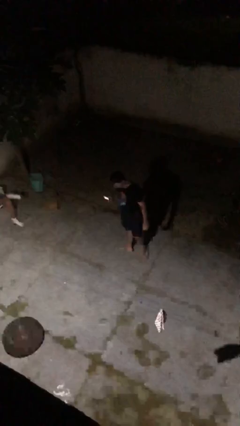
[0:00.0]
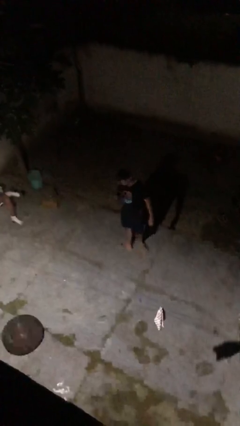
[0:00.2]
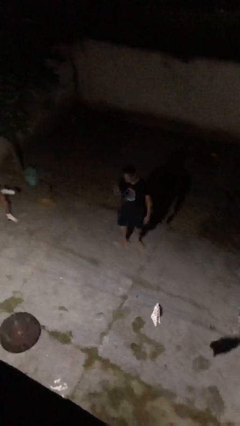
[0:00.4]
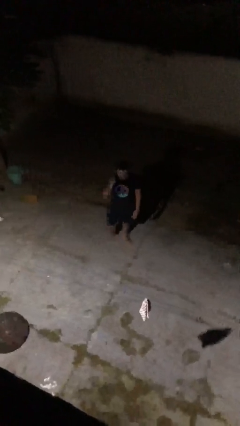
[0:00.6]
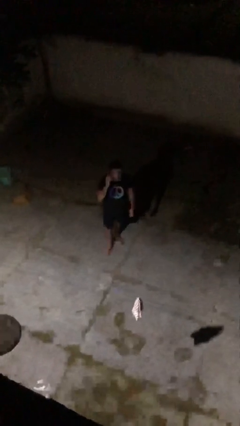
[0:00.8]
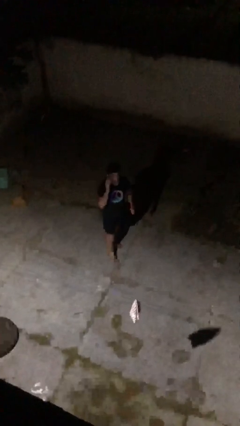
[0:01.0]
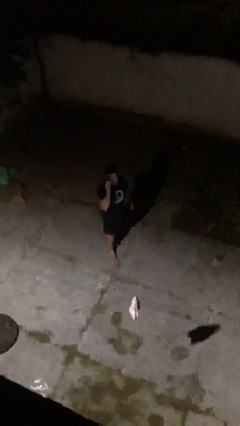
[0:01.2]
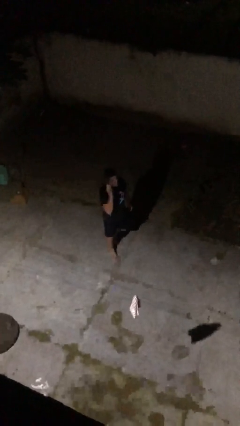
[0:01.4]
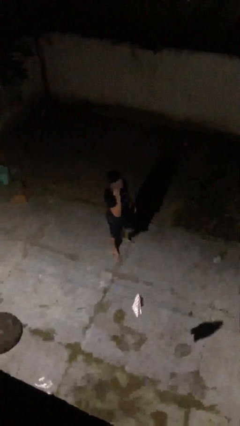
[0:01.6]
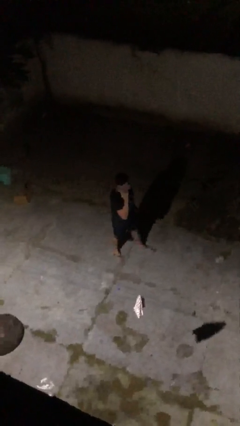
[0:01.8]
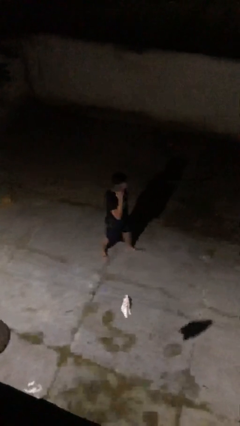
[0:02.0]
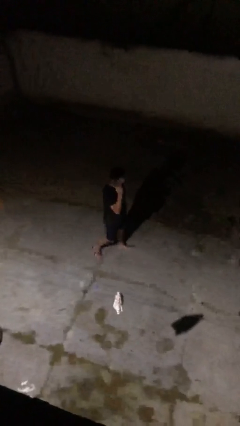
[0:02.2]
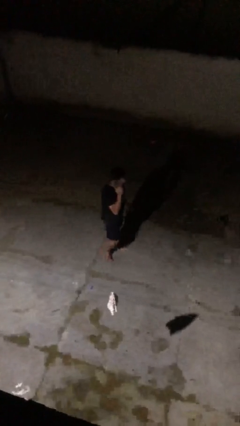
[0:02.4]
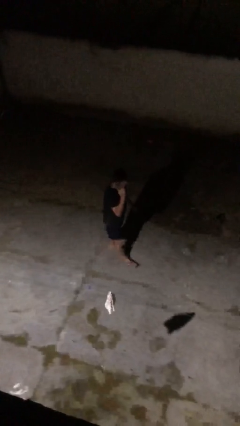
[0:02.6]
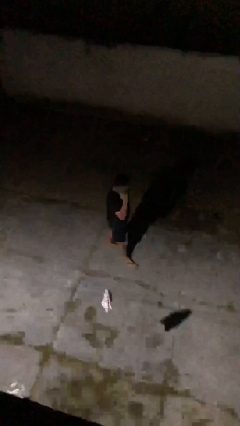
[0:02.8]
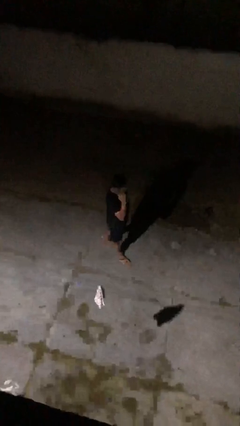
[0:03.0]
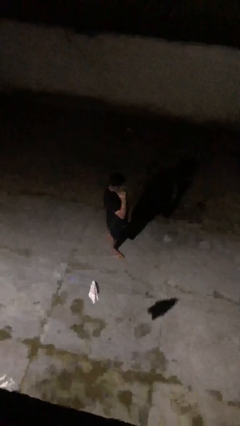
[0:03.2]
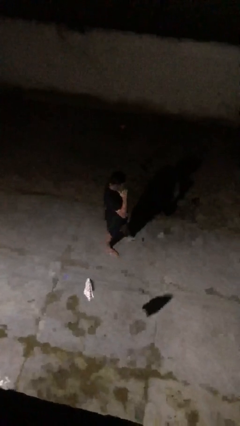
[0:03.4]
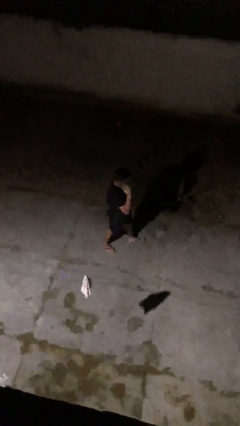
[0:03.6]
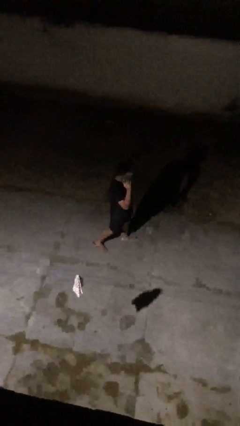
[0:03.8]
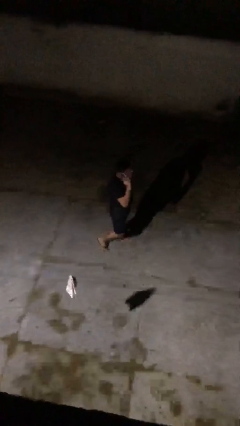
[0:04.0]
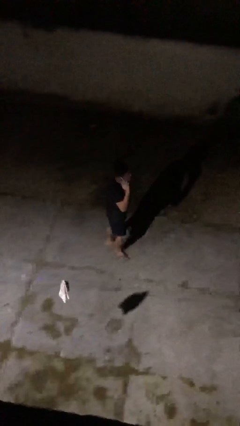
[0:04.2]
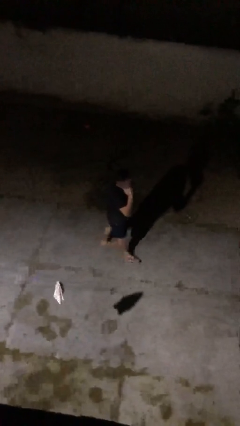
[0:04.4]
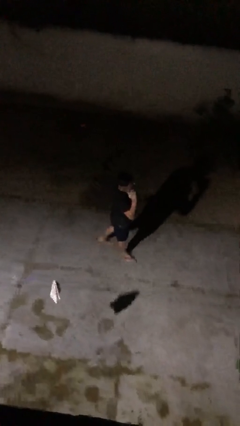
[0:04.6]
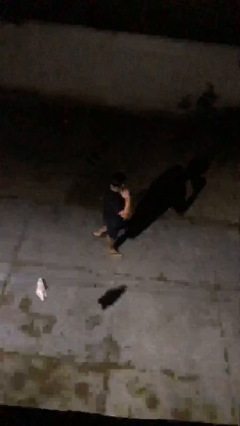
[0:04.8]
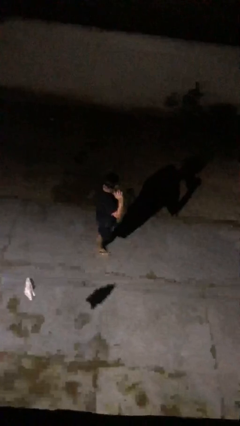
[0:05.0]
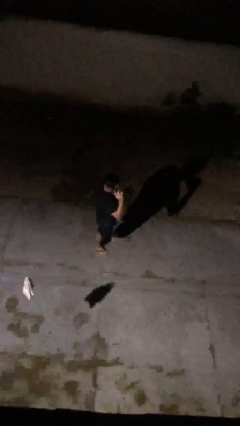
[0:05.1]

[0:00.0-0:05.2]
person talks on phone

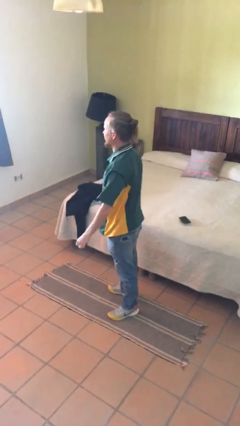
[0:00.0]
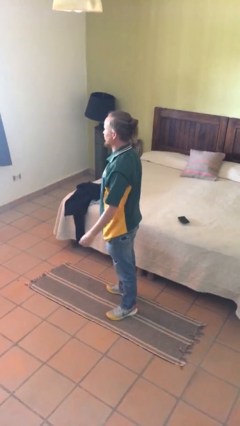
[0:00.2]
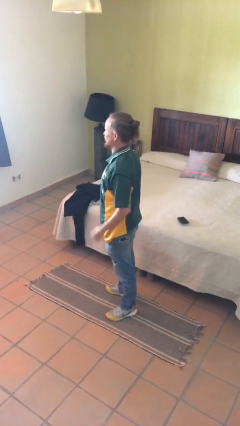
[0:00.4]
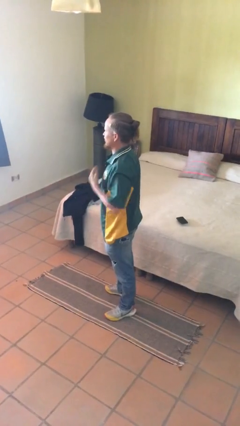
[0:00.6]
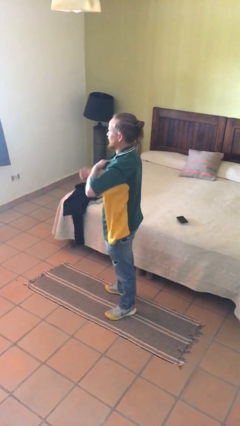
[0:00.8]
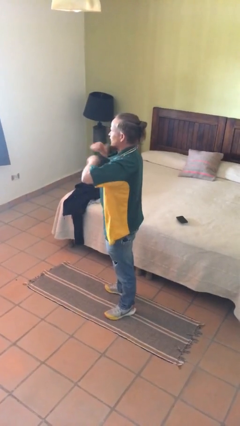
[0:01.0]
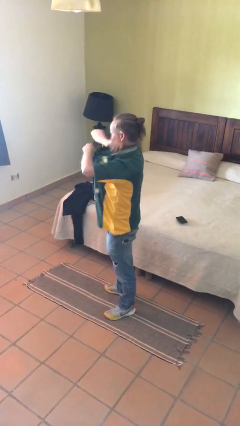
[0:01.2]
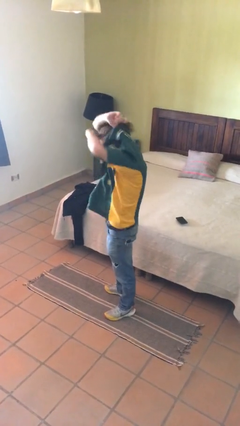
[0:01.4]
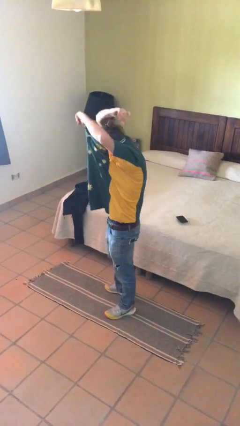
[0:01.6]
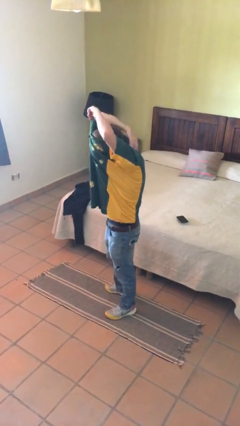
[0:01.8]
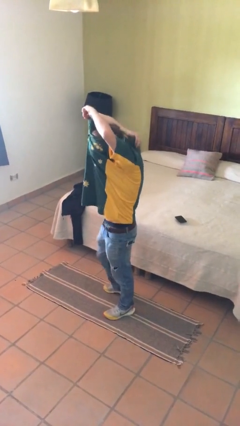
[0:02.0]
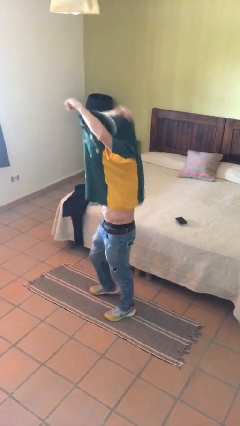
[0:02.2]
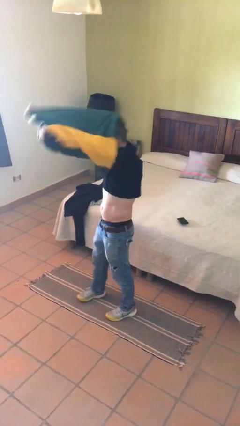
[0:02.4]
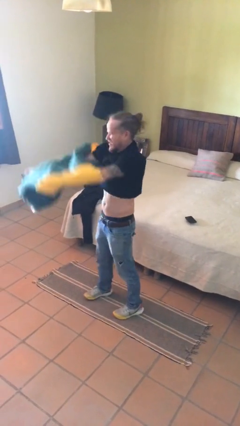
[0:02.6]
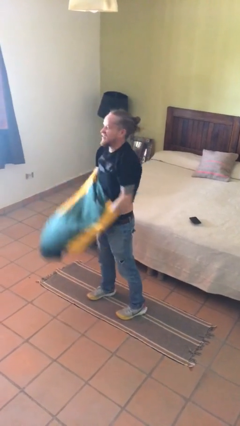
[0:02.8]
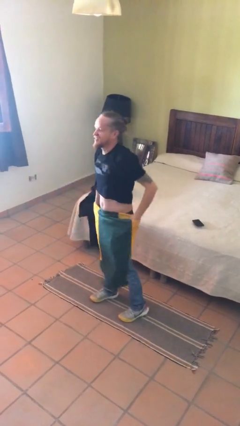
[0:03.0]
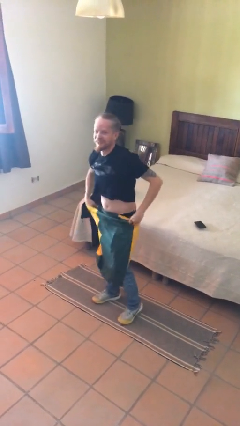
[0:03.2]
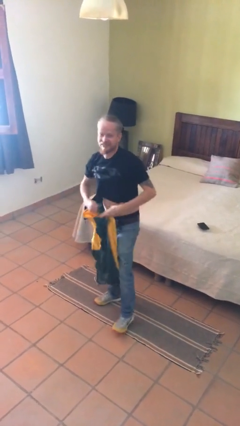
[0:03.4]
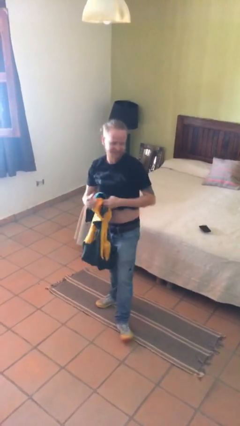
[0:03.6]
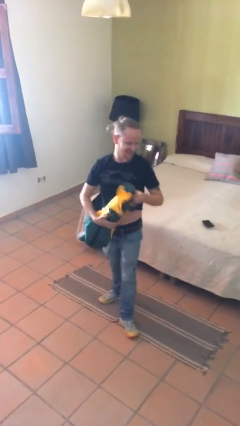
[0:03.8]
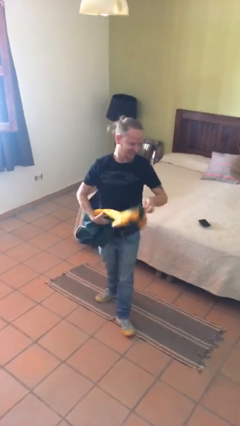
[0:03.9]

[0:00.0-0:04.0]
person takes off shirt

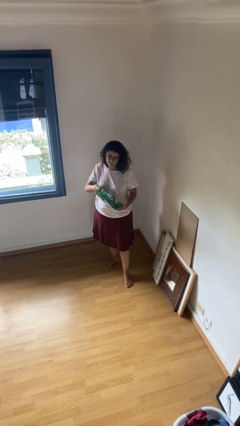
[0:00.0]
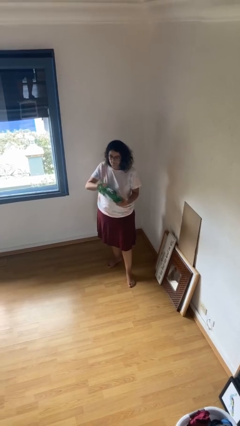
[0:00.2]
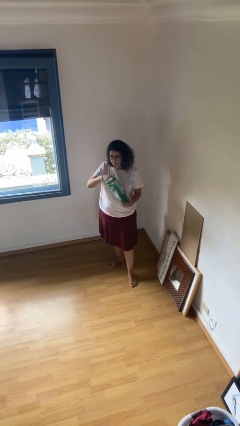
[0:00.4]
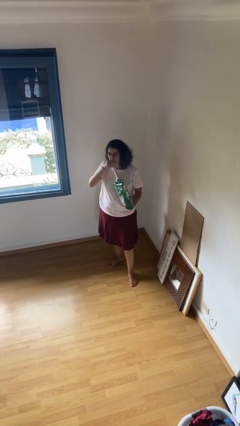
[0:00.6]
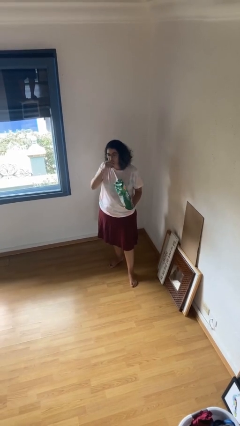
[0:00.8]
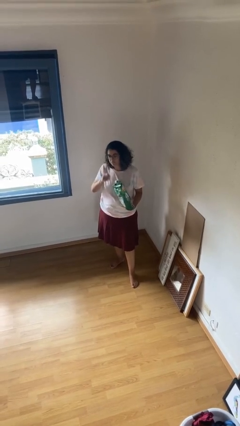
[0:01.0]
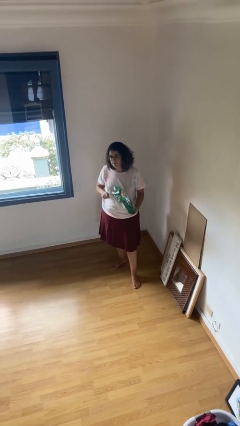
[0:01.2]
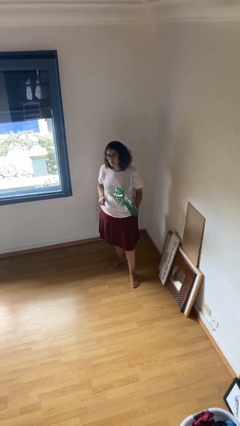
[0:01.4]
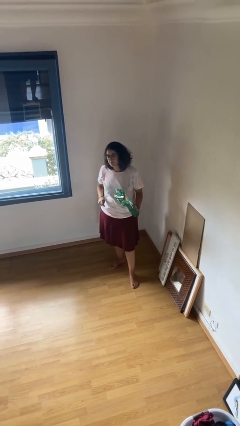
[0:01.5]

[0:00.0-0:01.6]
person eats snack from bag

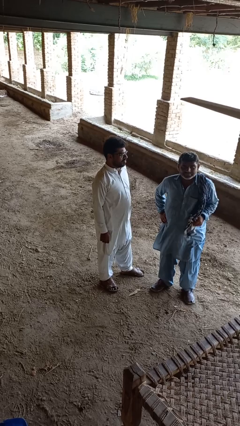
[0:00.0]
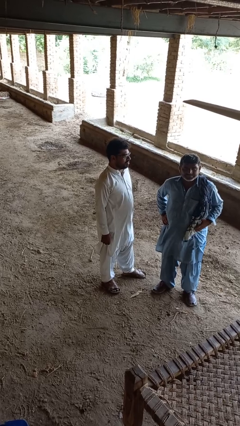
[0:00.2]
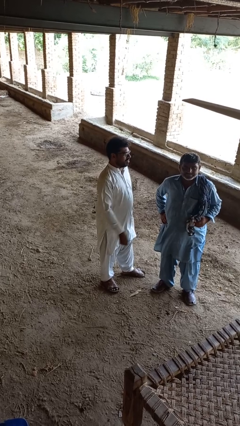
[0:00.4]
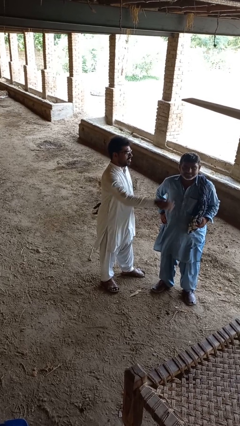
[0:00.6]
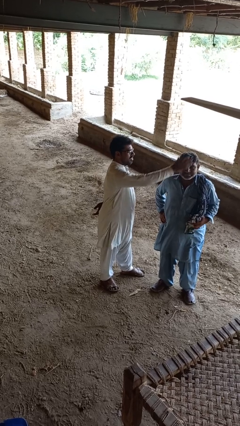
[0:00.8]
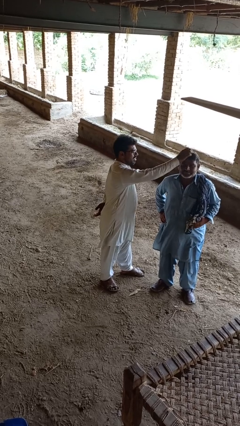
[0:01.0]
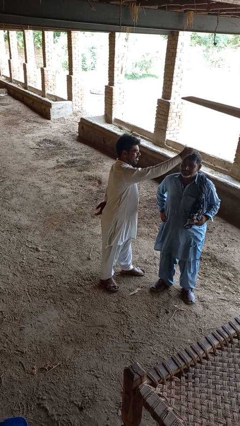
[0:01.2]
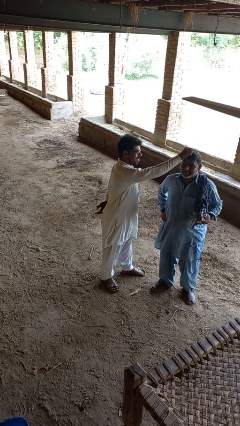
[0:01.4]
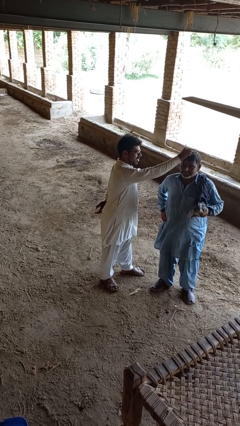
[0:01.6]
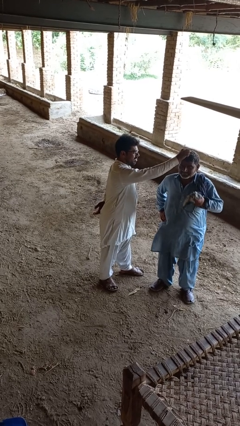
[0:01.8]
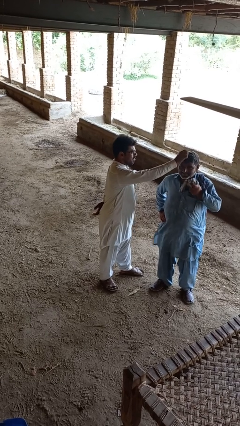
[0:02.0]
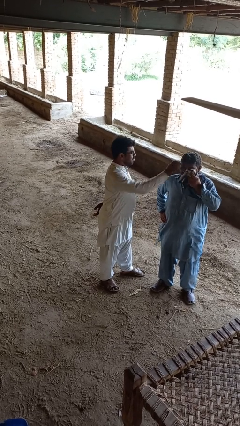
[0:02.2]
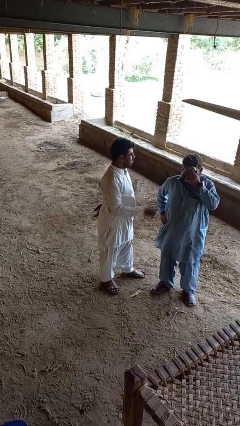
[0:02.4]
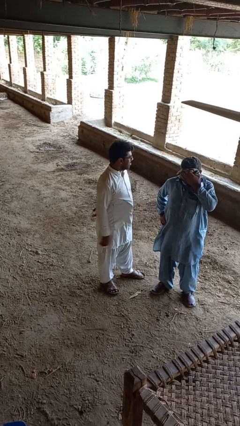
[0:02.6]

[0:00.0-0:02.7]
person grabs person by hair

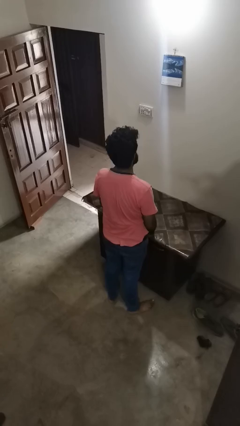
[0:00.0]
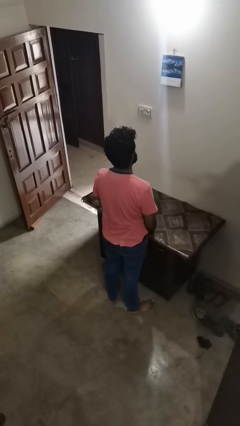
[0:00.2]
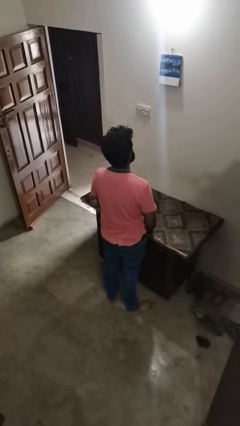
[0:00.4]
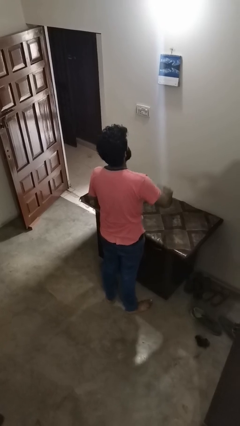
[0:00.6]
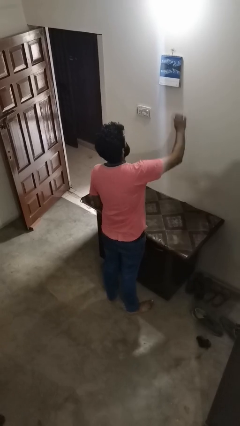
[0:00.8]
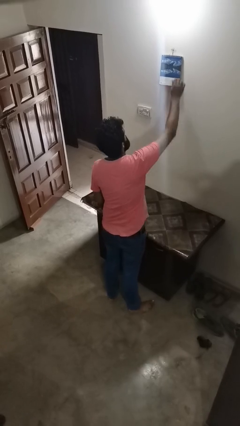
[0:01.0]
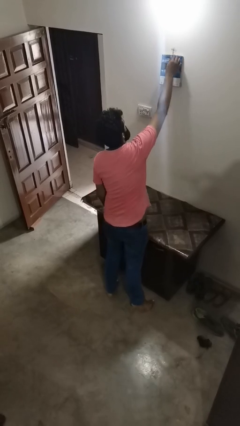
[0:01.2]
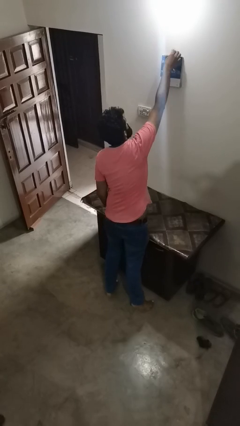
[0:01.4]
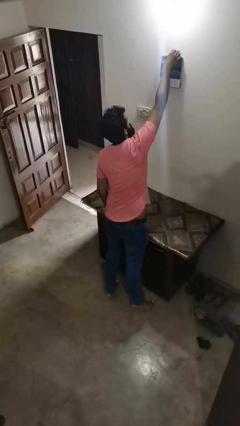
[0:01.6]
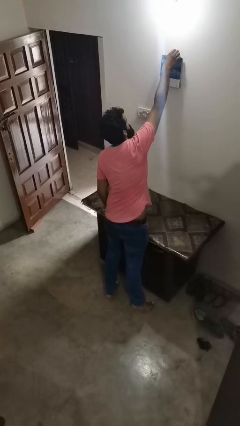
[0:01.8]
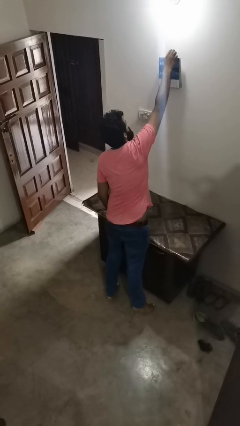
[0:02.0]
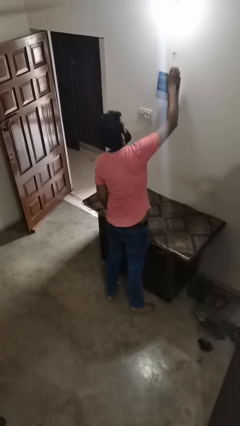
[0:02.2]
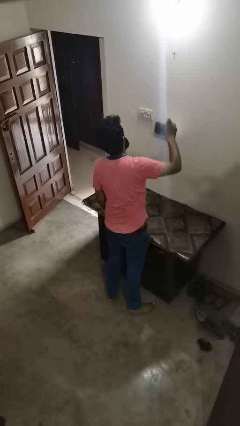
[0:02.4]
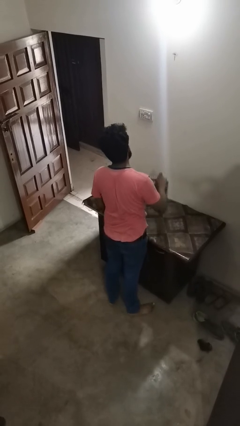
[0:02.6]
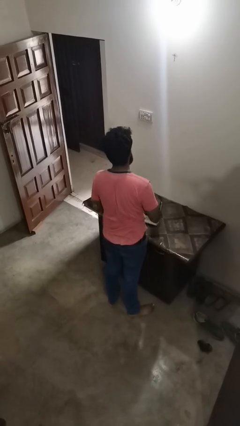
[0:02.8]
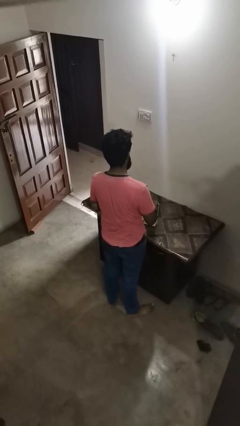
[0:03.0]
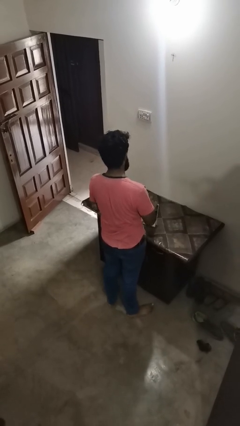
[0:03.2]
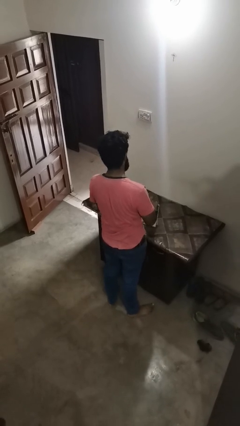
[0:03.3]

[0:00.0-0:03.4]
person takes down picture frame

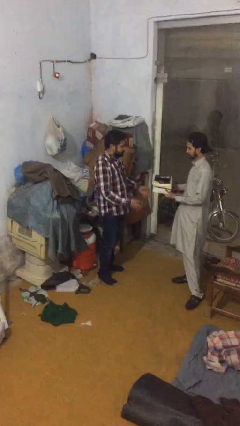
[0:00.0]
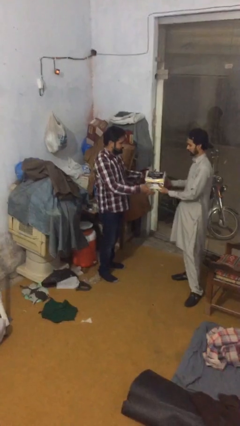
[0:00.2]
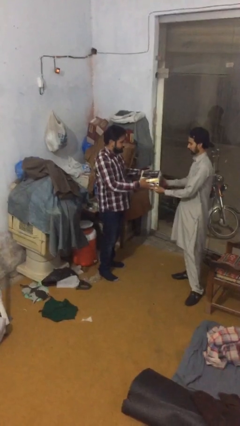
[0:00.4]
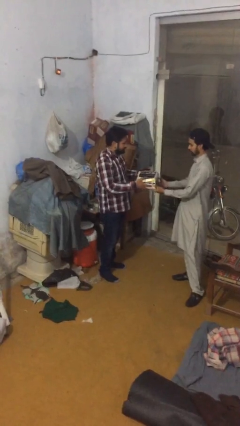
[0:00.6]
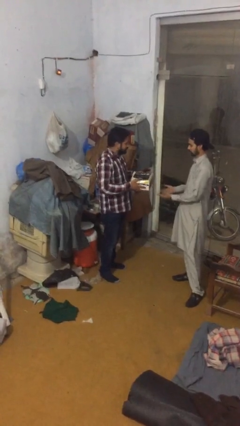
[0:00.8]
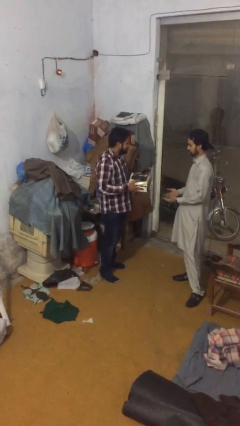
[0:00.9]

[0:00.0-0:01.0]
person transfers object to person
